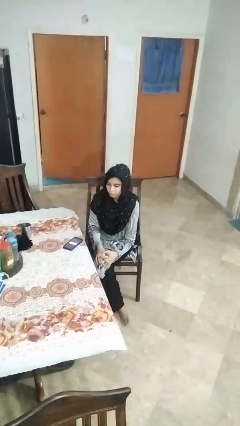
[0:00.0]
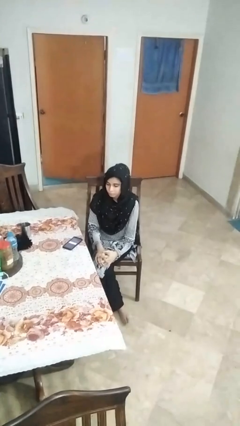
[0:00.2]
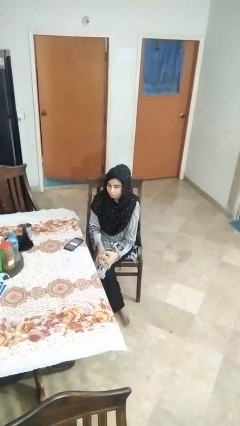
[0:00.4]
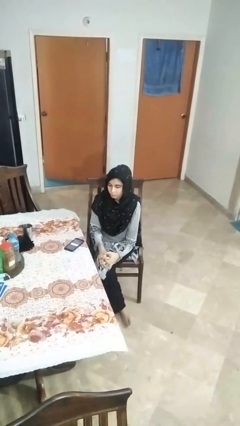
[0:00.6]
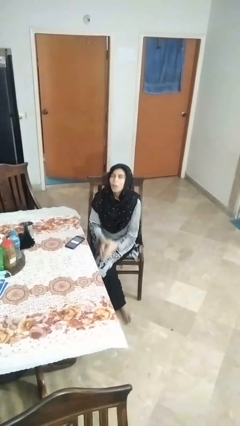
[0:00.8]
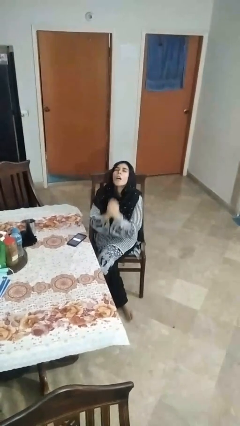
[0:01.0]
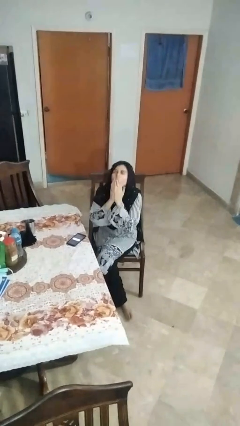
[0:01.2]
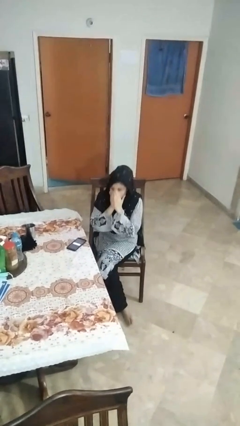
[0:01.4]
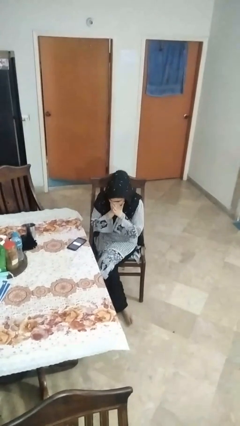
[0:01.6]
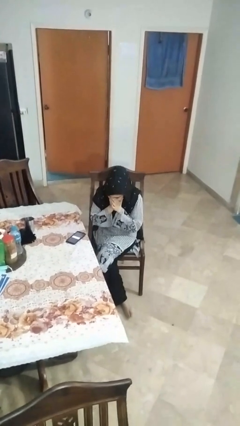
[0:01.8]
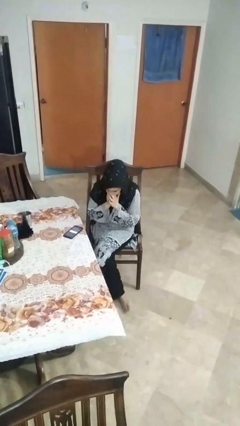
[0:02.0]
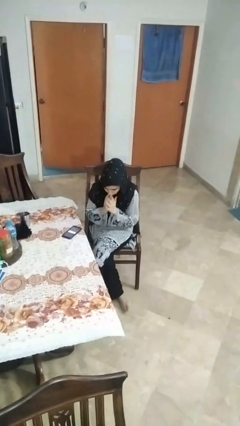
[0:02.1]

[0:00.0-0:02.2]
person sneezes into hand

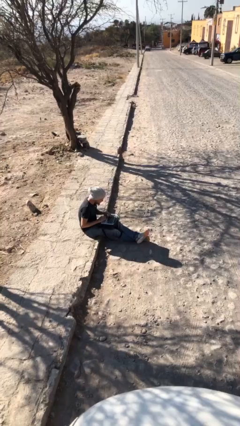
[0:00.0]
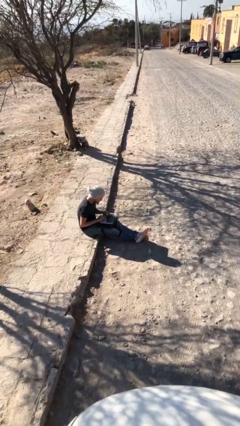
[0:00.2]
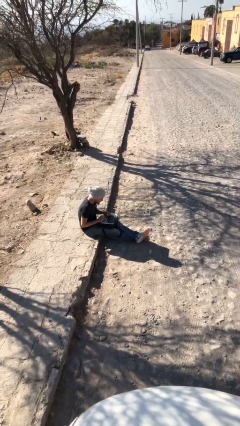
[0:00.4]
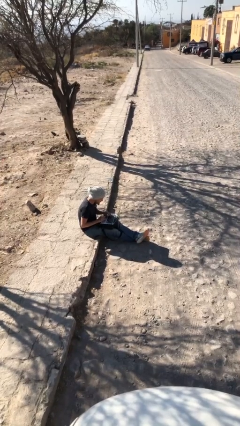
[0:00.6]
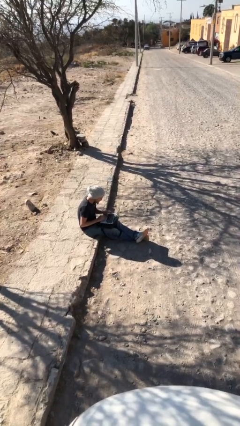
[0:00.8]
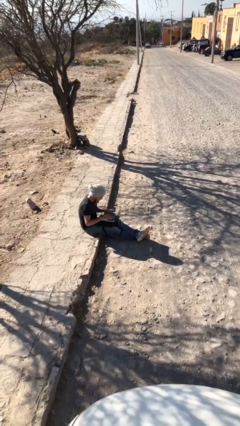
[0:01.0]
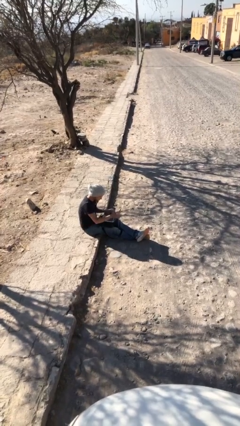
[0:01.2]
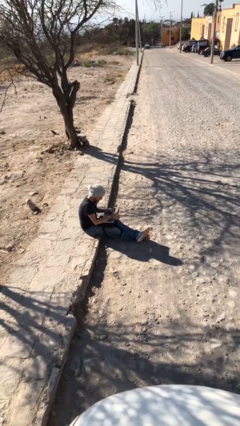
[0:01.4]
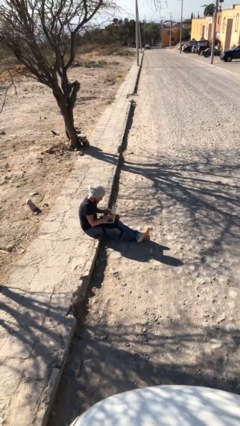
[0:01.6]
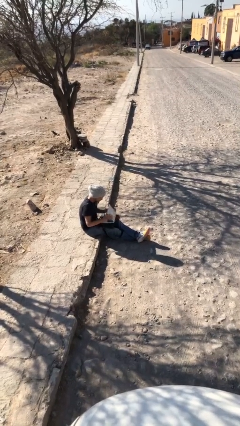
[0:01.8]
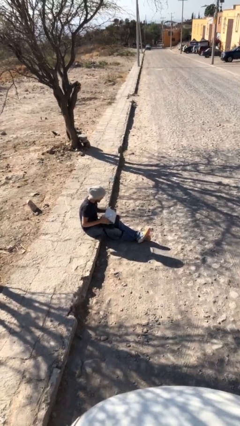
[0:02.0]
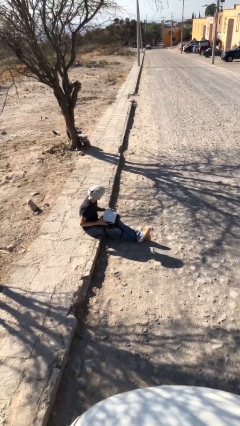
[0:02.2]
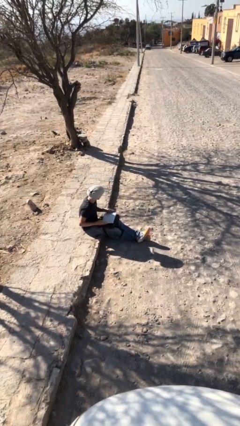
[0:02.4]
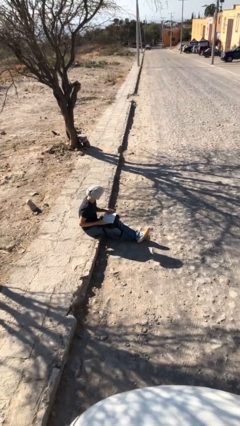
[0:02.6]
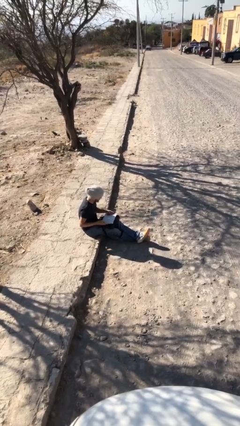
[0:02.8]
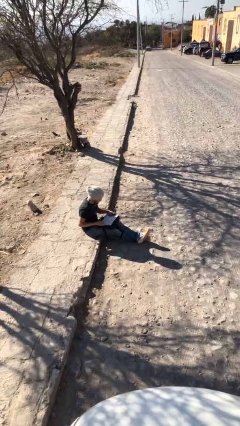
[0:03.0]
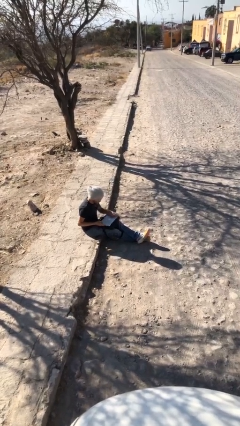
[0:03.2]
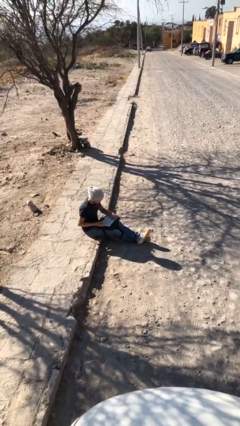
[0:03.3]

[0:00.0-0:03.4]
person interacts with laptop

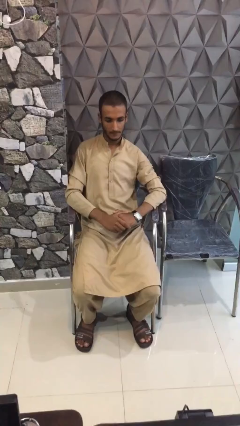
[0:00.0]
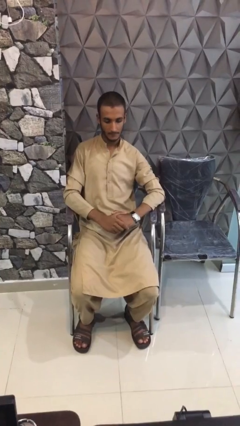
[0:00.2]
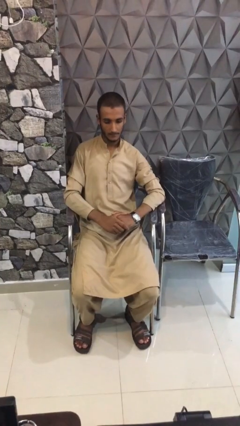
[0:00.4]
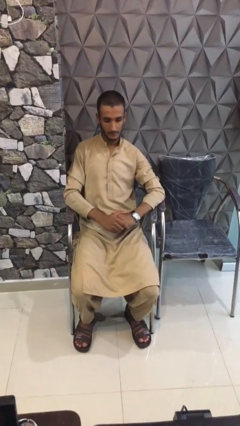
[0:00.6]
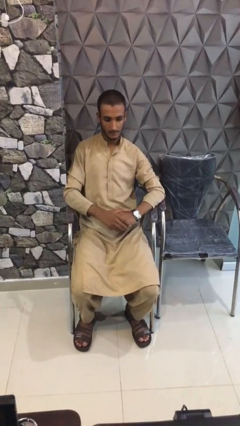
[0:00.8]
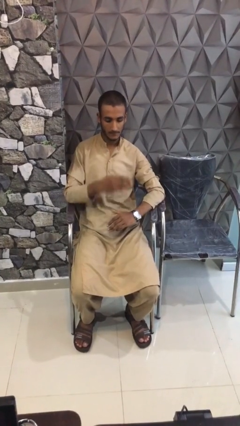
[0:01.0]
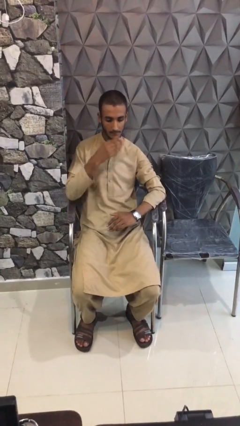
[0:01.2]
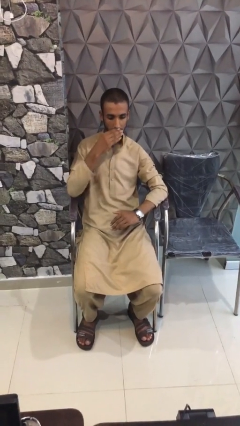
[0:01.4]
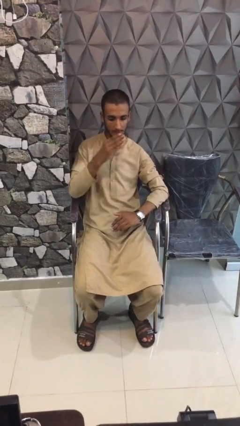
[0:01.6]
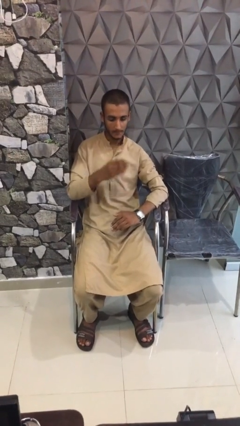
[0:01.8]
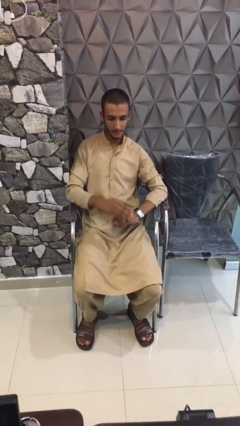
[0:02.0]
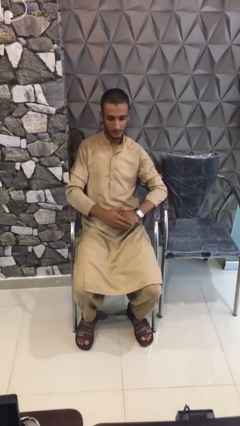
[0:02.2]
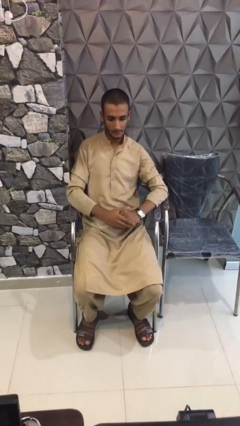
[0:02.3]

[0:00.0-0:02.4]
person gestures blow kiss

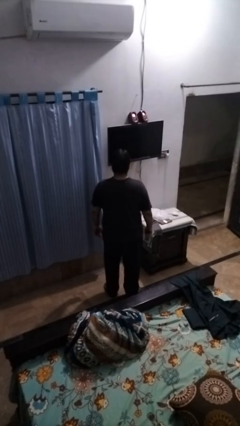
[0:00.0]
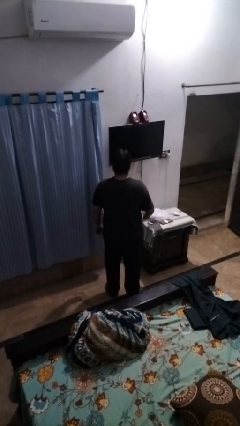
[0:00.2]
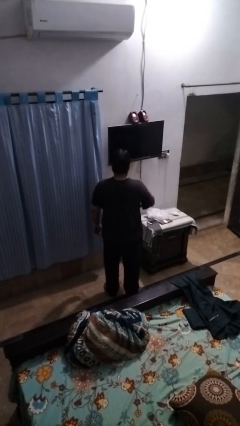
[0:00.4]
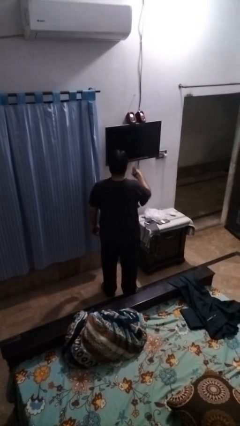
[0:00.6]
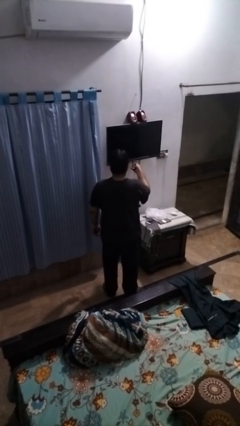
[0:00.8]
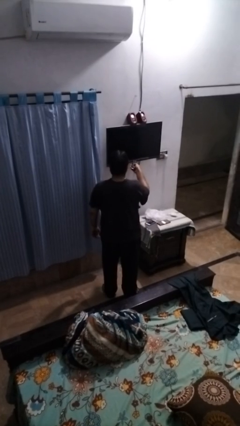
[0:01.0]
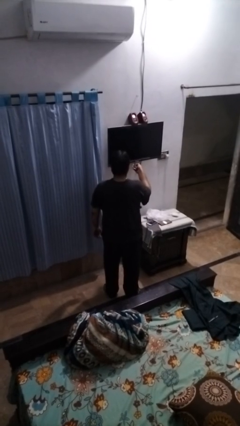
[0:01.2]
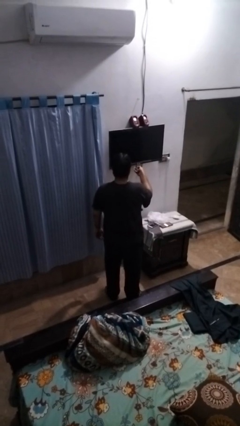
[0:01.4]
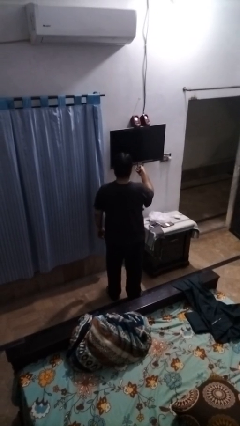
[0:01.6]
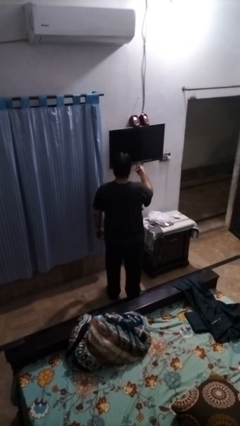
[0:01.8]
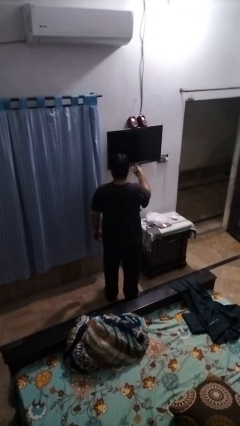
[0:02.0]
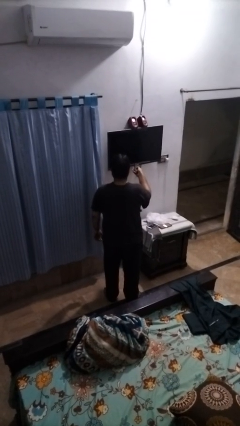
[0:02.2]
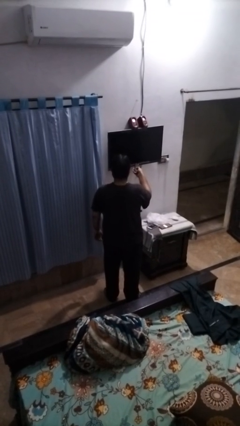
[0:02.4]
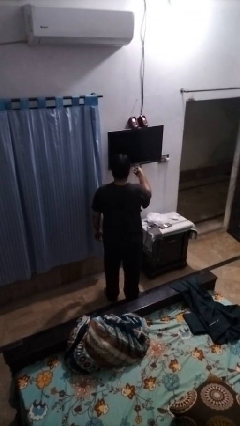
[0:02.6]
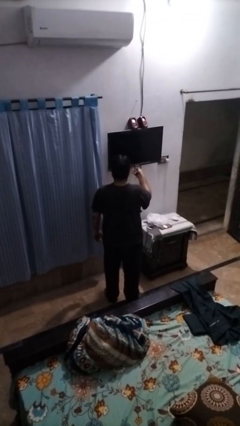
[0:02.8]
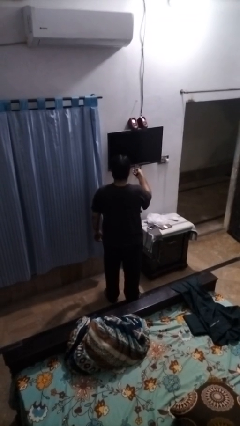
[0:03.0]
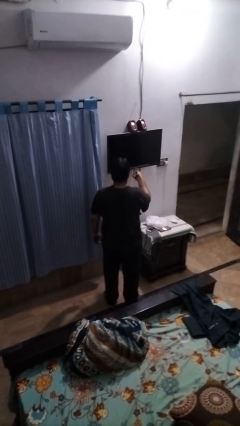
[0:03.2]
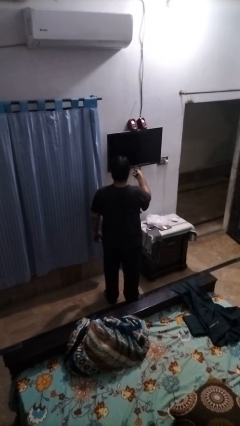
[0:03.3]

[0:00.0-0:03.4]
person uses television remote

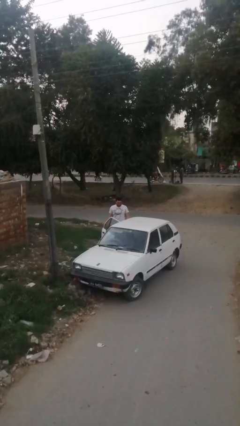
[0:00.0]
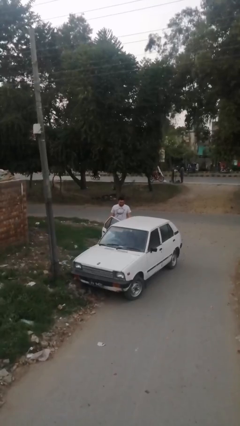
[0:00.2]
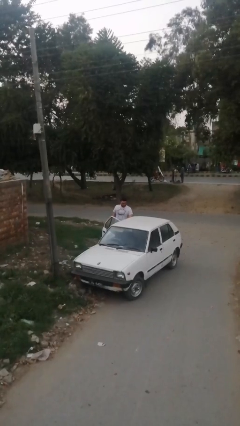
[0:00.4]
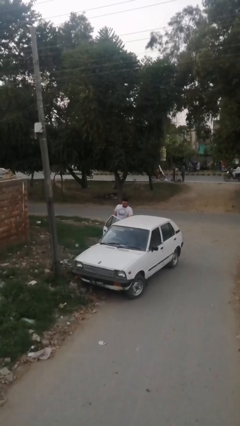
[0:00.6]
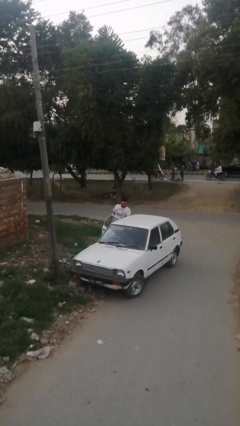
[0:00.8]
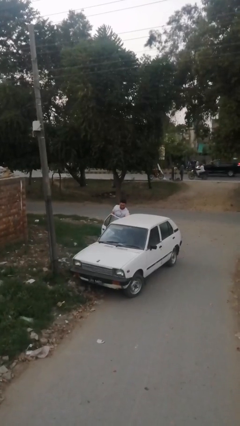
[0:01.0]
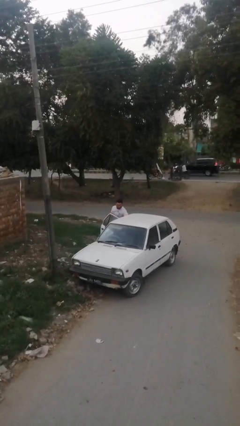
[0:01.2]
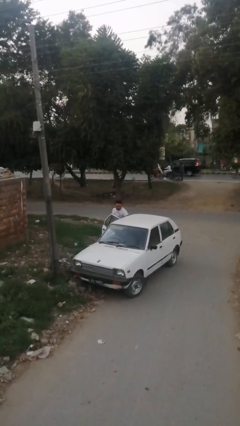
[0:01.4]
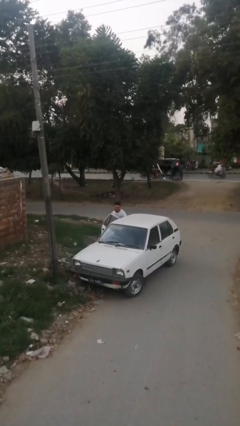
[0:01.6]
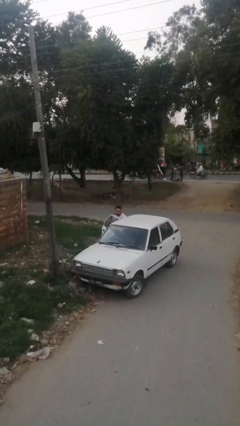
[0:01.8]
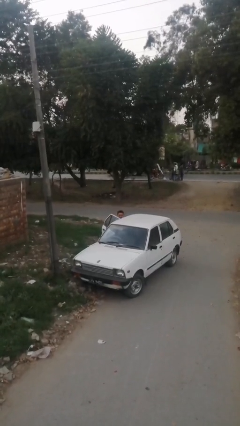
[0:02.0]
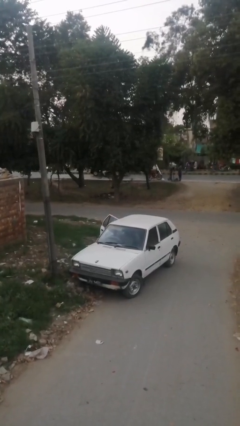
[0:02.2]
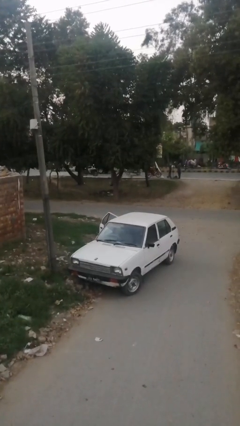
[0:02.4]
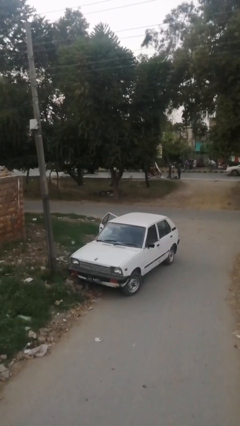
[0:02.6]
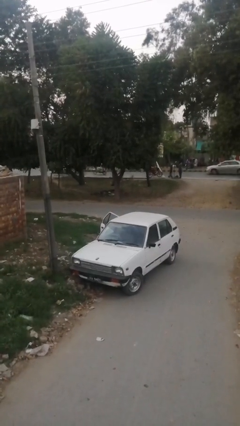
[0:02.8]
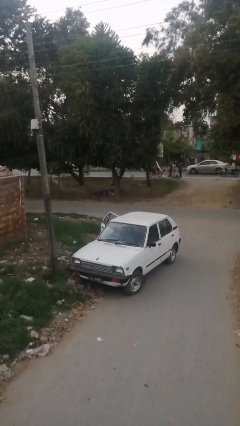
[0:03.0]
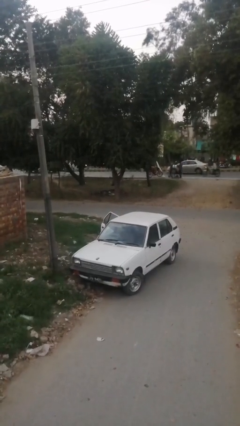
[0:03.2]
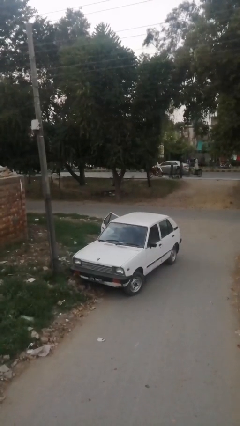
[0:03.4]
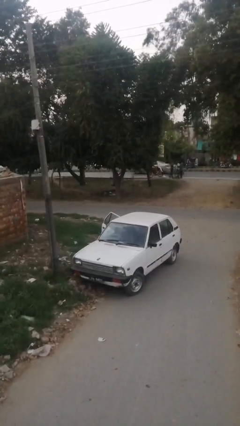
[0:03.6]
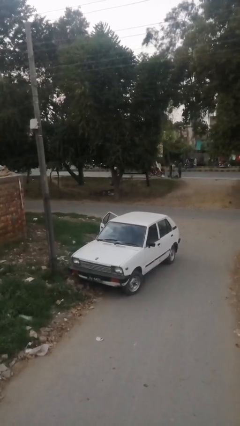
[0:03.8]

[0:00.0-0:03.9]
person enters car

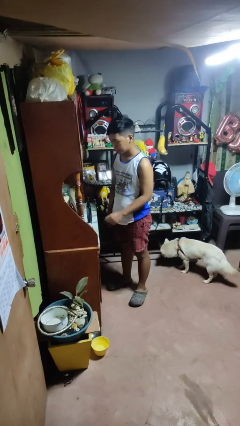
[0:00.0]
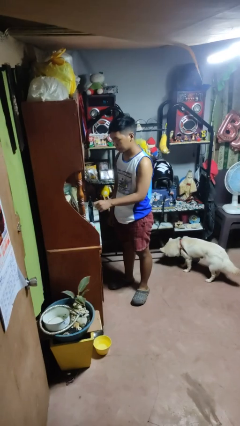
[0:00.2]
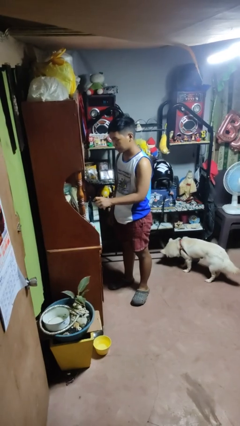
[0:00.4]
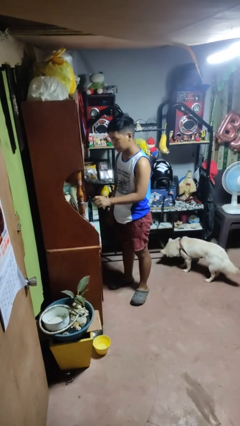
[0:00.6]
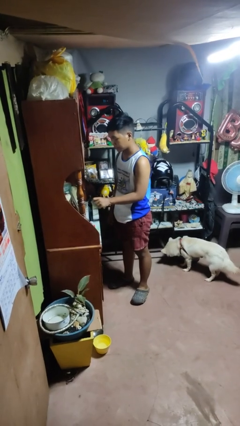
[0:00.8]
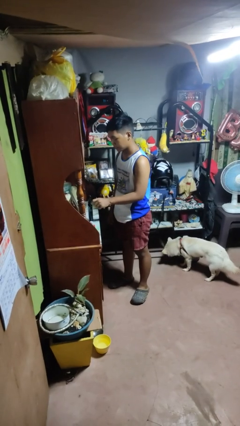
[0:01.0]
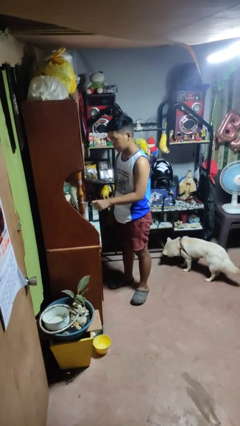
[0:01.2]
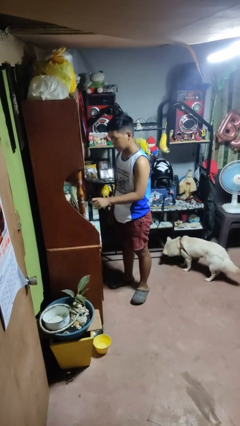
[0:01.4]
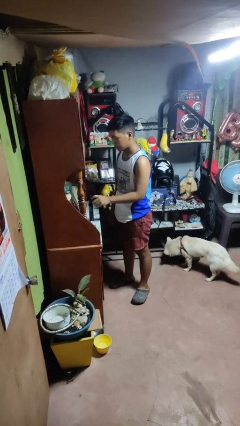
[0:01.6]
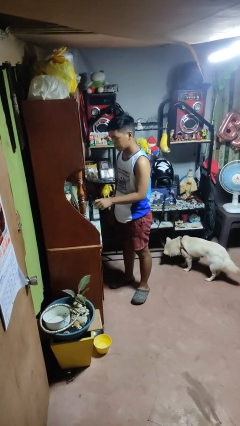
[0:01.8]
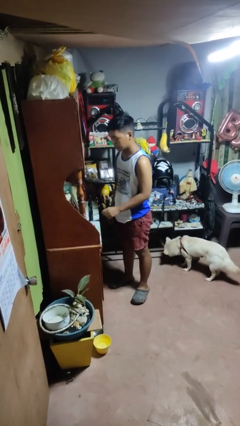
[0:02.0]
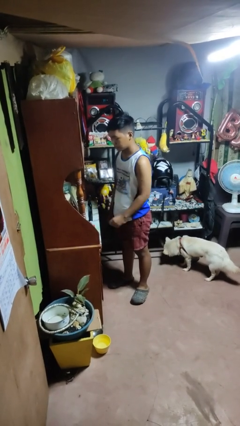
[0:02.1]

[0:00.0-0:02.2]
person taps object with finger
